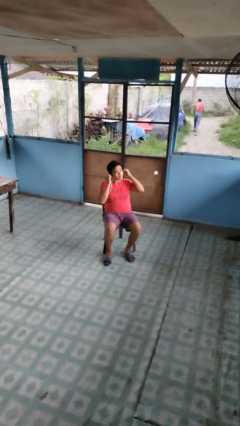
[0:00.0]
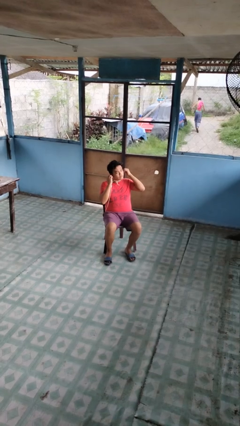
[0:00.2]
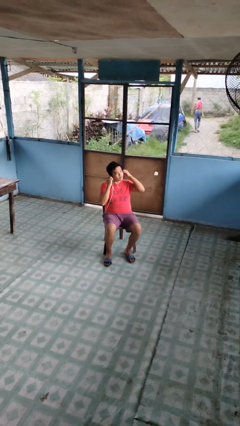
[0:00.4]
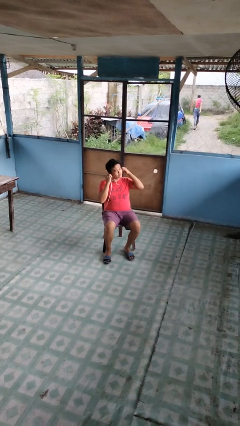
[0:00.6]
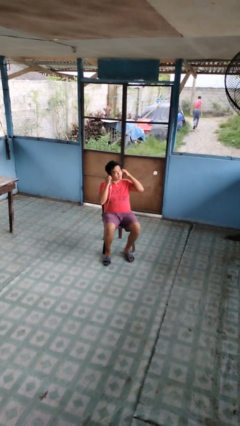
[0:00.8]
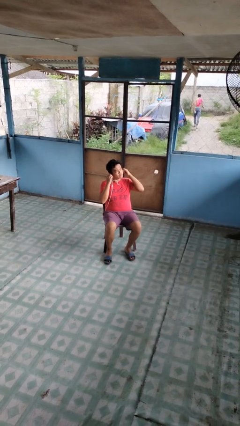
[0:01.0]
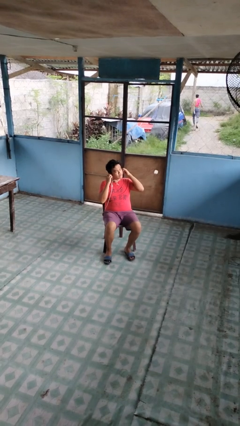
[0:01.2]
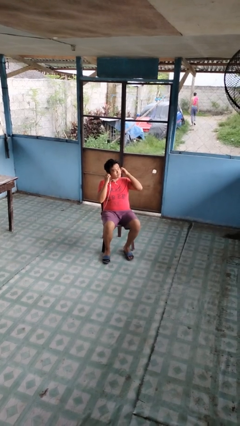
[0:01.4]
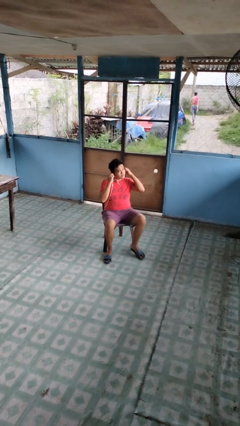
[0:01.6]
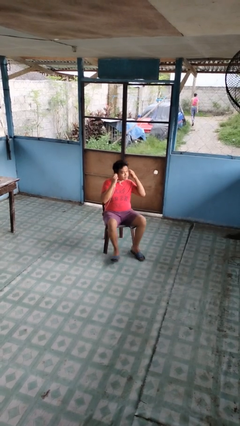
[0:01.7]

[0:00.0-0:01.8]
person puts on headphones

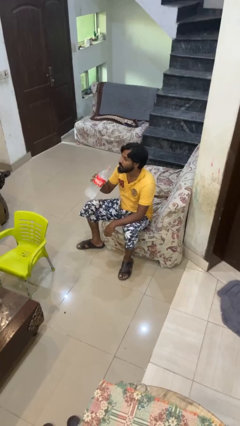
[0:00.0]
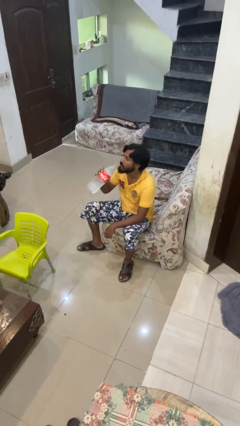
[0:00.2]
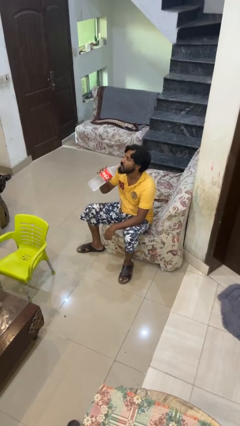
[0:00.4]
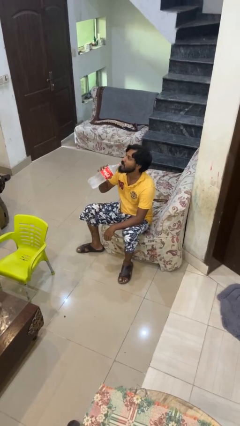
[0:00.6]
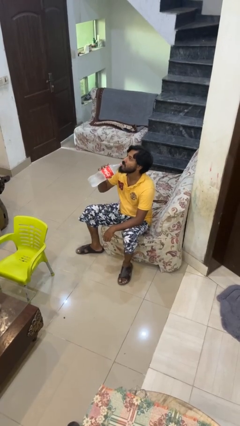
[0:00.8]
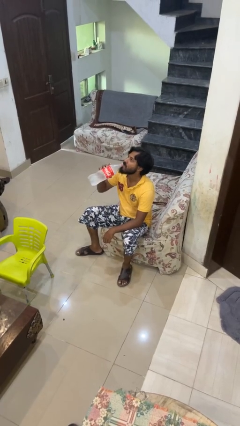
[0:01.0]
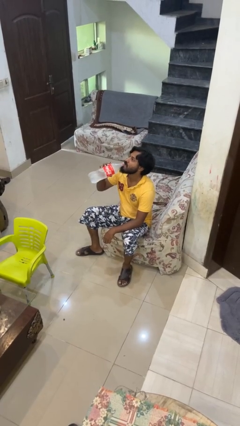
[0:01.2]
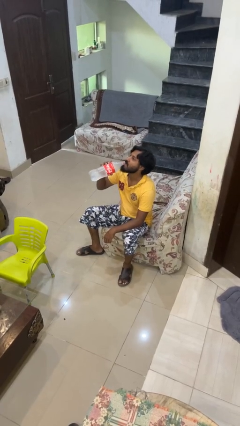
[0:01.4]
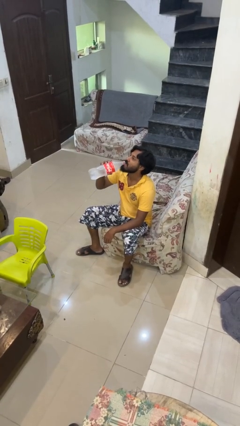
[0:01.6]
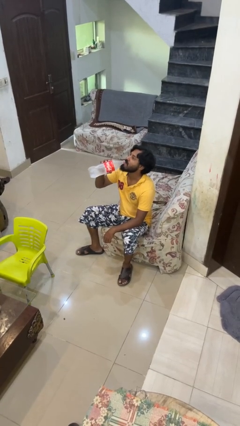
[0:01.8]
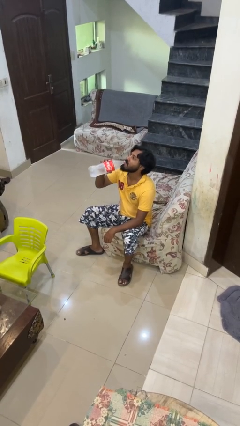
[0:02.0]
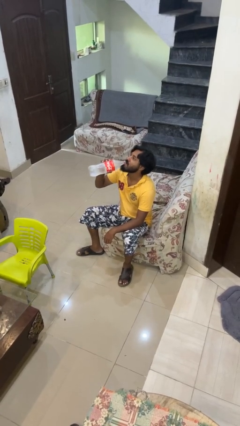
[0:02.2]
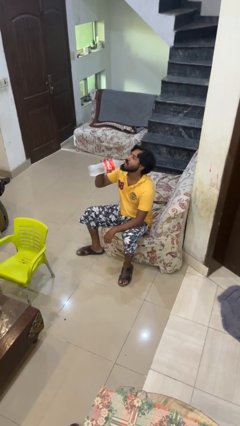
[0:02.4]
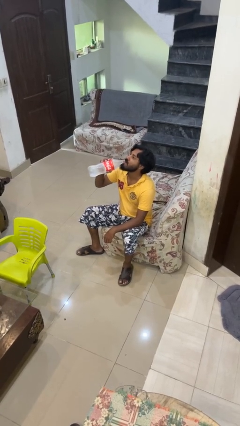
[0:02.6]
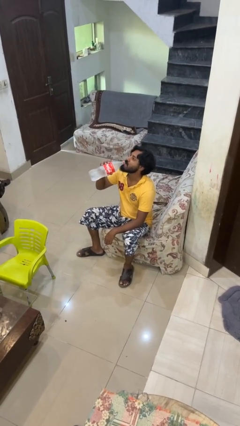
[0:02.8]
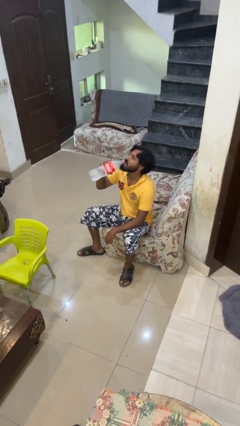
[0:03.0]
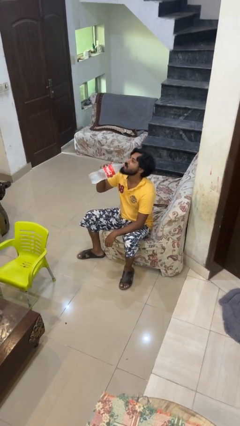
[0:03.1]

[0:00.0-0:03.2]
person drinks from bottle

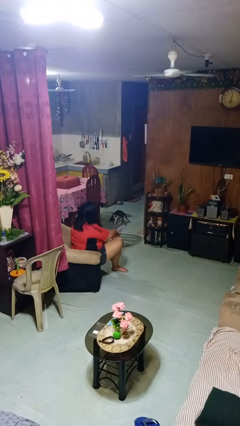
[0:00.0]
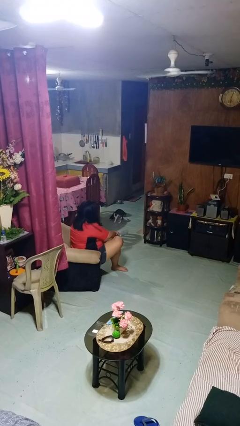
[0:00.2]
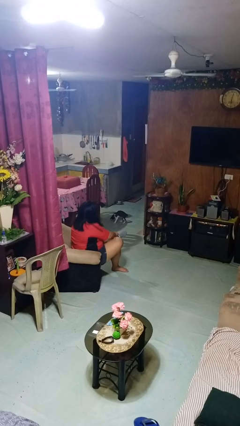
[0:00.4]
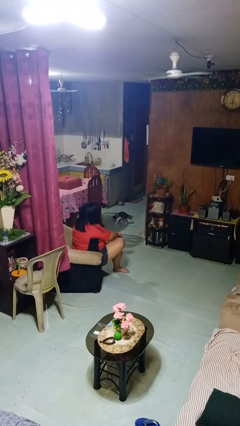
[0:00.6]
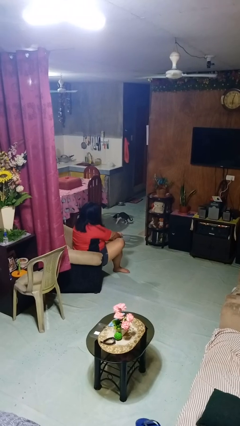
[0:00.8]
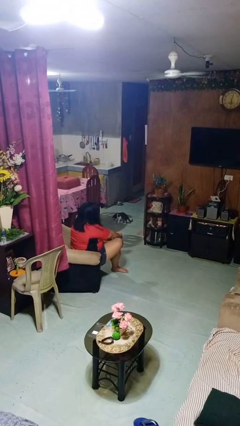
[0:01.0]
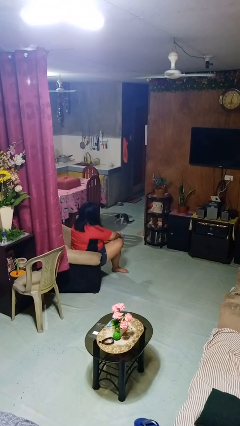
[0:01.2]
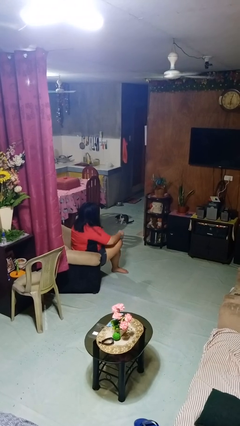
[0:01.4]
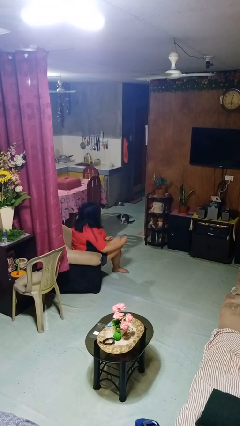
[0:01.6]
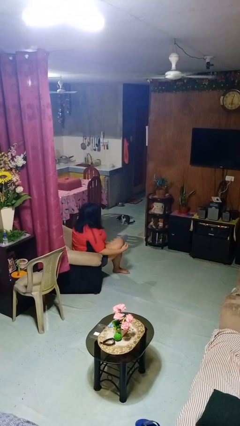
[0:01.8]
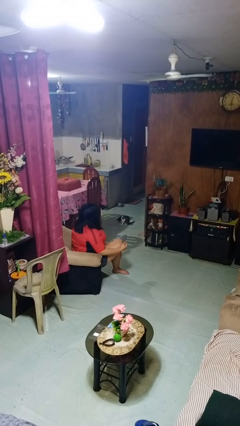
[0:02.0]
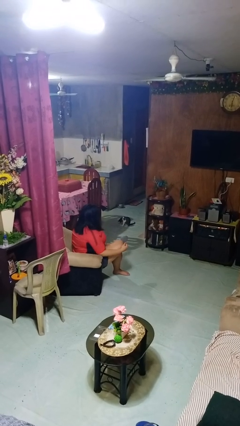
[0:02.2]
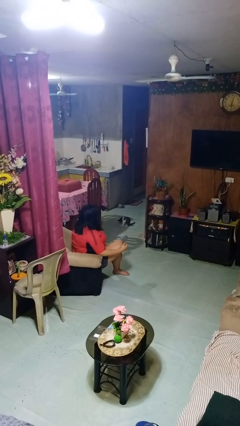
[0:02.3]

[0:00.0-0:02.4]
person puts on socks

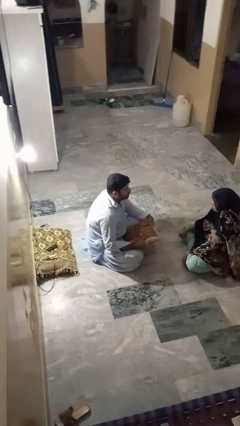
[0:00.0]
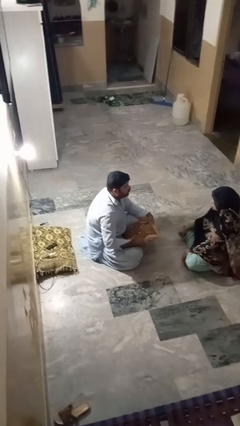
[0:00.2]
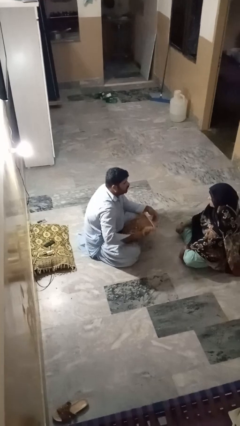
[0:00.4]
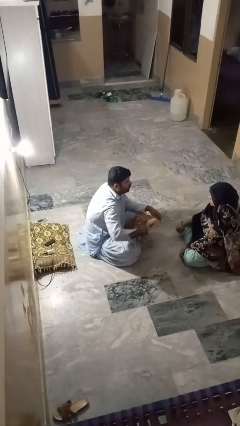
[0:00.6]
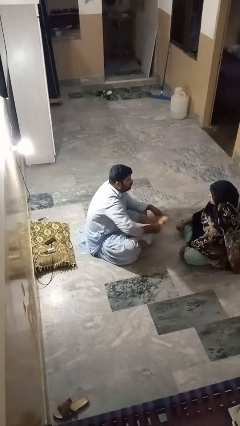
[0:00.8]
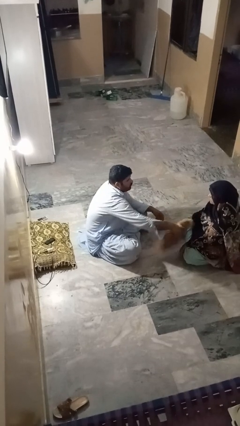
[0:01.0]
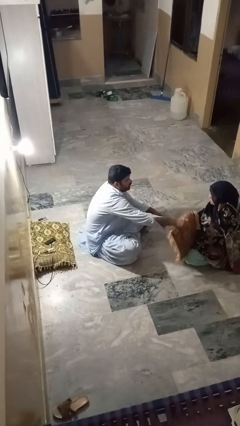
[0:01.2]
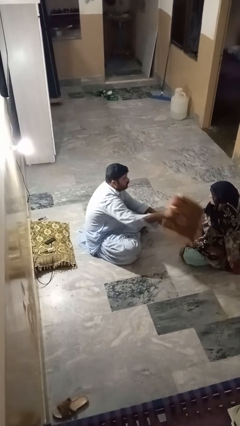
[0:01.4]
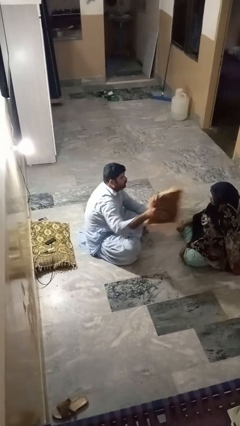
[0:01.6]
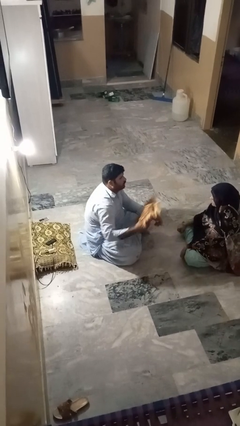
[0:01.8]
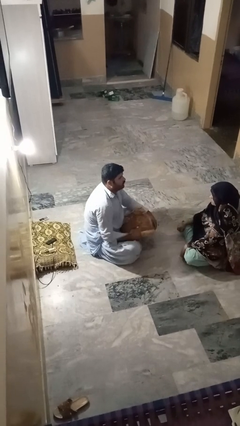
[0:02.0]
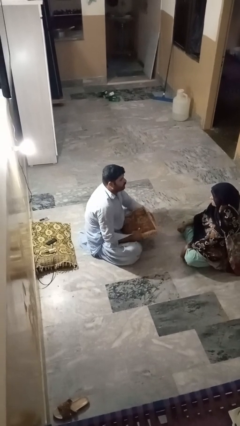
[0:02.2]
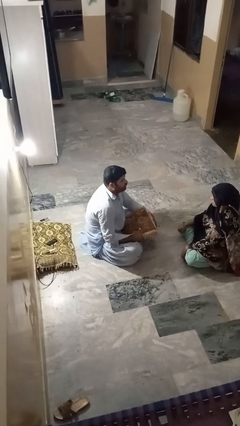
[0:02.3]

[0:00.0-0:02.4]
person hits person with pillow

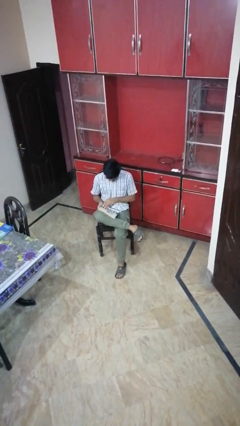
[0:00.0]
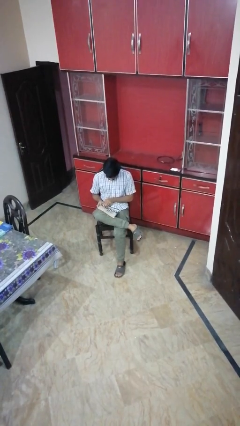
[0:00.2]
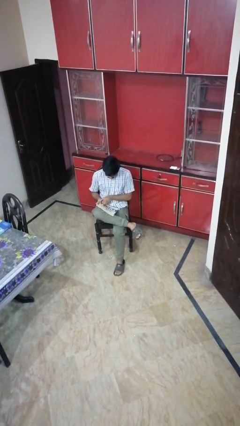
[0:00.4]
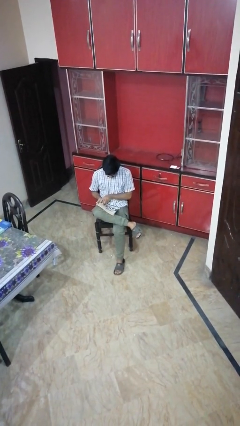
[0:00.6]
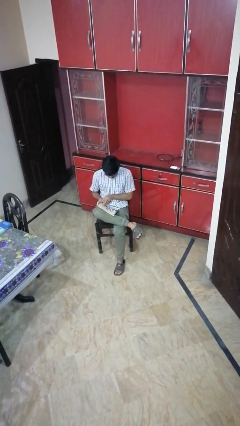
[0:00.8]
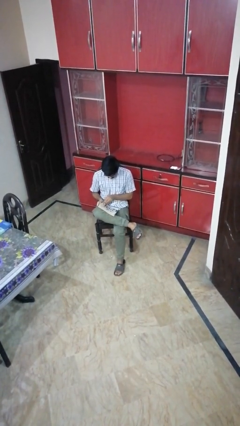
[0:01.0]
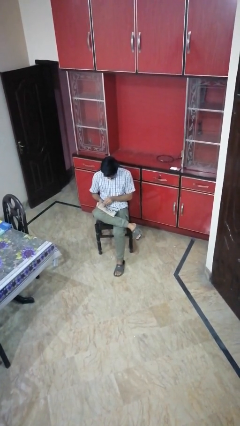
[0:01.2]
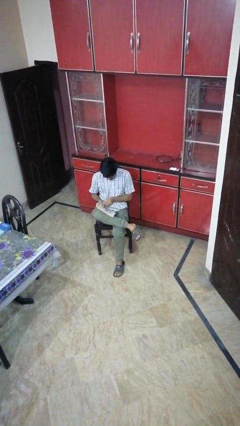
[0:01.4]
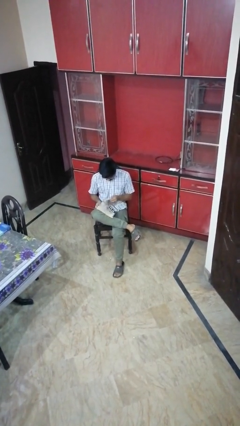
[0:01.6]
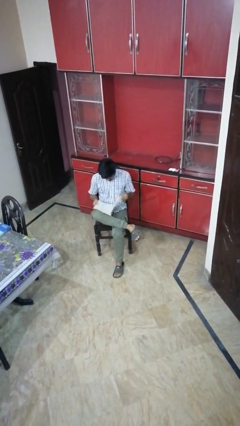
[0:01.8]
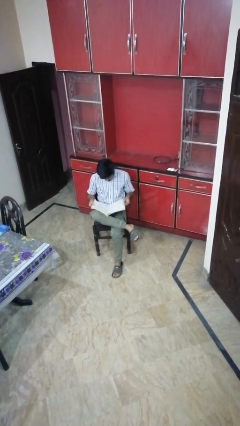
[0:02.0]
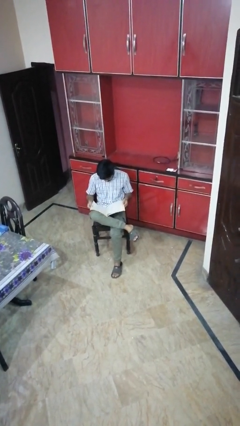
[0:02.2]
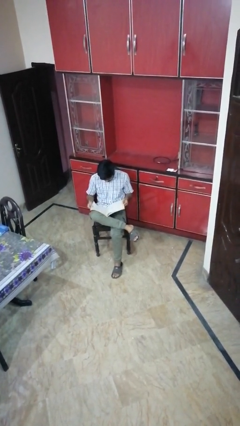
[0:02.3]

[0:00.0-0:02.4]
person exercises with situp

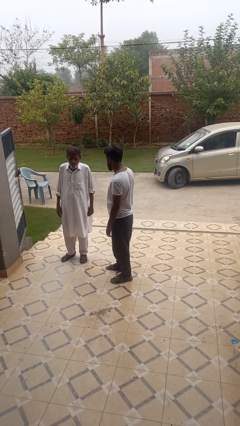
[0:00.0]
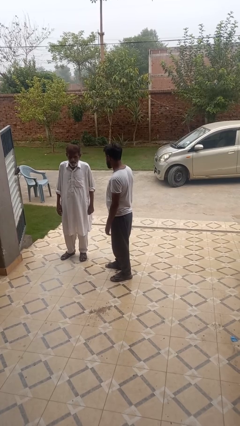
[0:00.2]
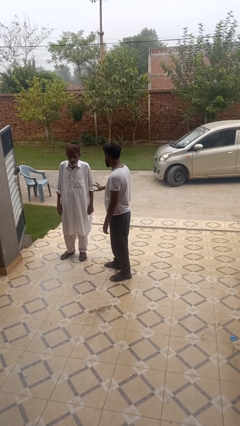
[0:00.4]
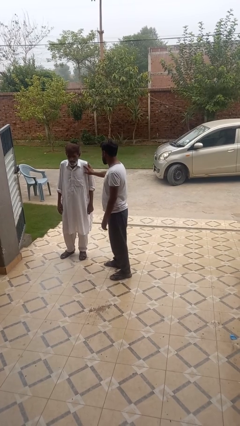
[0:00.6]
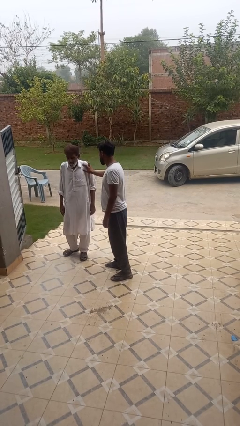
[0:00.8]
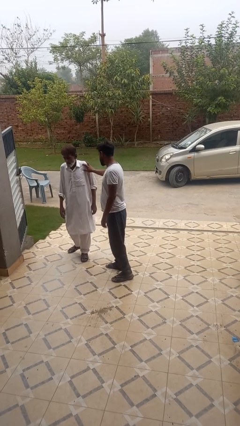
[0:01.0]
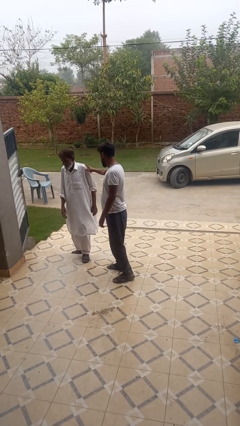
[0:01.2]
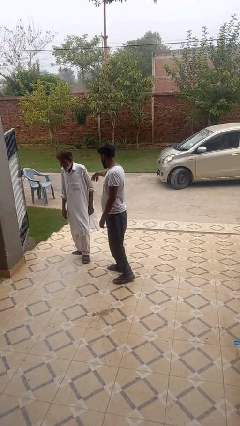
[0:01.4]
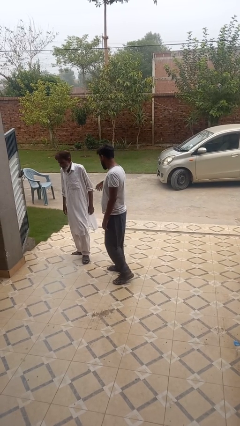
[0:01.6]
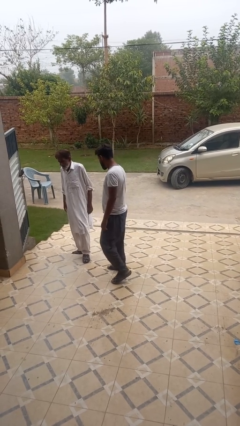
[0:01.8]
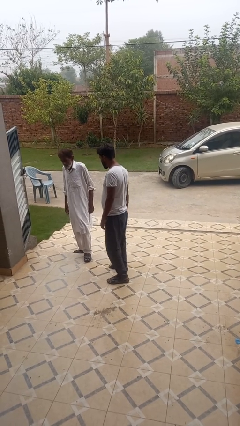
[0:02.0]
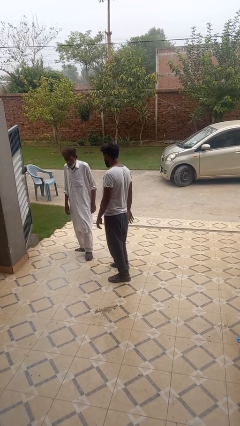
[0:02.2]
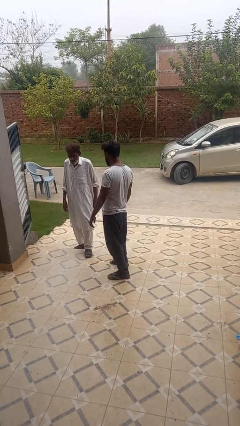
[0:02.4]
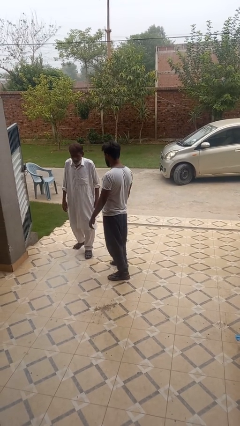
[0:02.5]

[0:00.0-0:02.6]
person shoves person

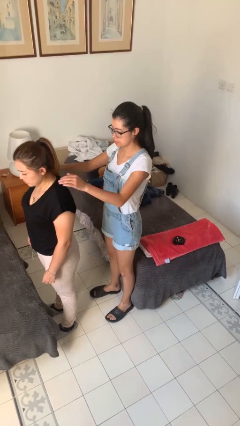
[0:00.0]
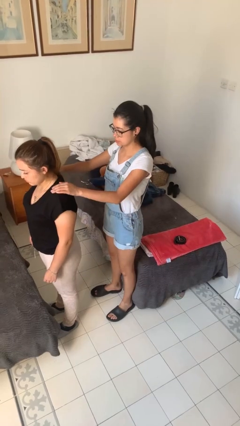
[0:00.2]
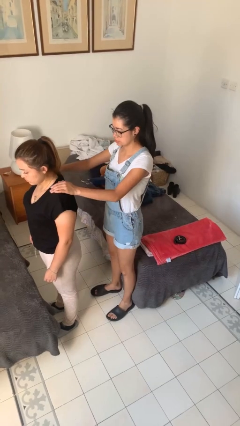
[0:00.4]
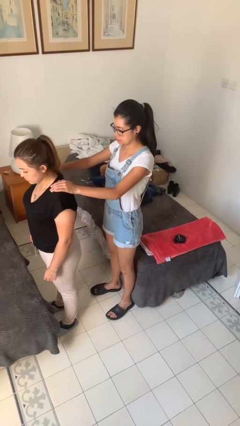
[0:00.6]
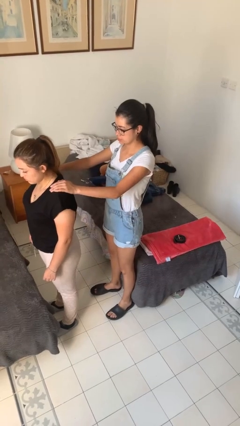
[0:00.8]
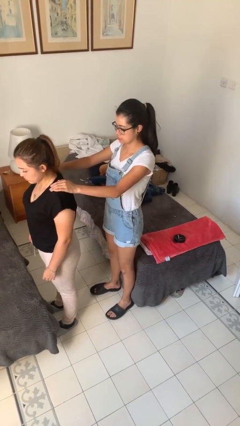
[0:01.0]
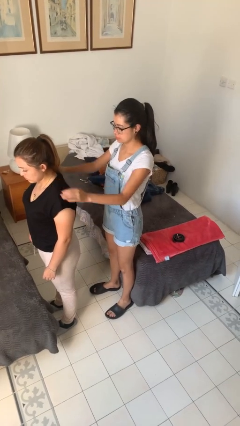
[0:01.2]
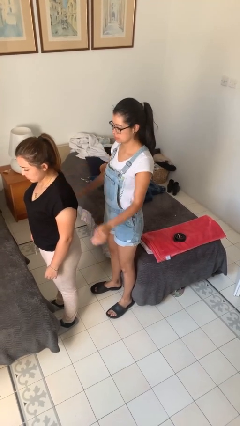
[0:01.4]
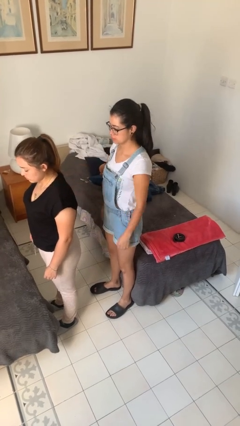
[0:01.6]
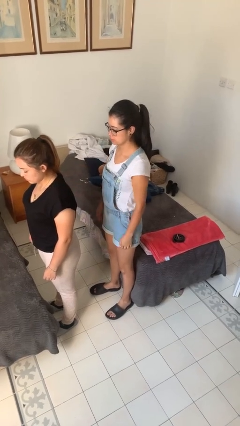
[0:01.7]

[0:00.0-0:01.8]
person pounds shoulders of person

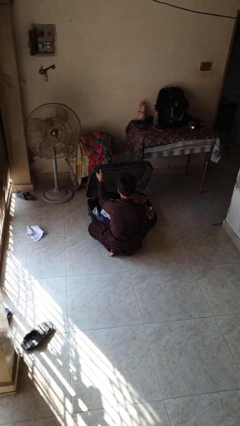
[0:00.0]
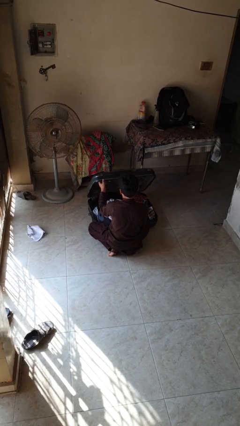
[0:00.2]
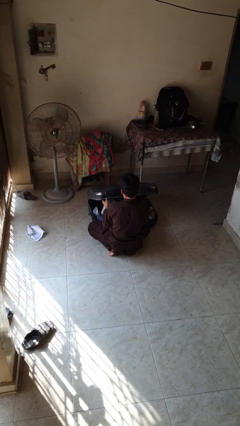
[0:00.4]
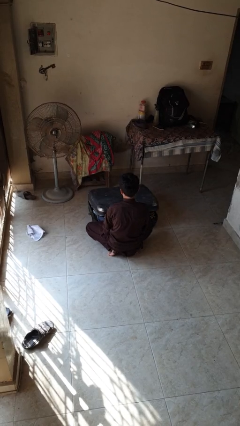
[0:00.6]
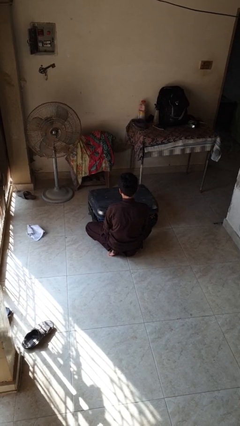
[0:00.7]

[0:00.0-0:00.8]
person closes suitcase
